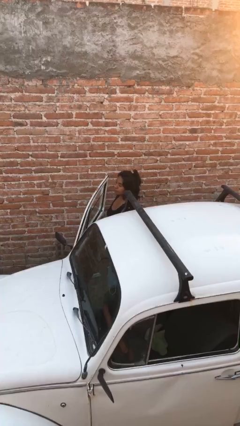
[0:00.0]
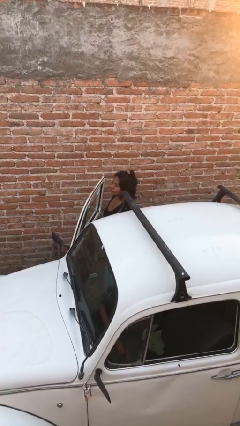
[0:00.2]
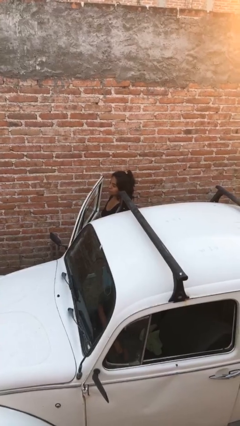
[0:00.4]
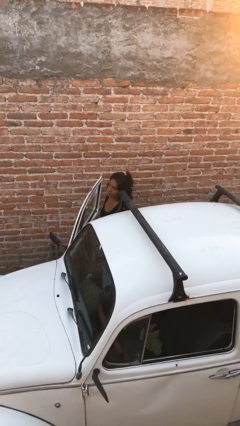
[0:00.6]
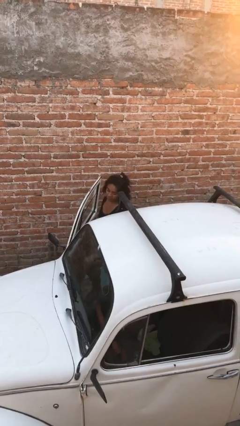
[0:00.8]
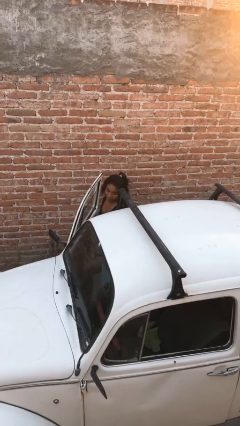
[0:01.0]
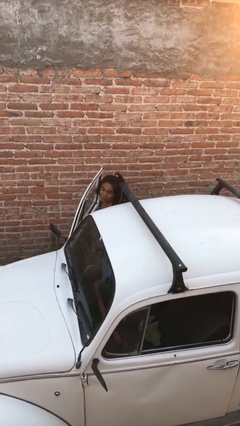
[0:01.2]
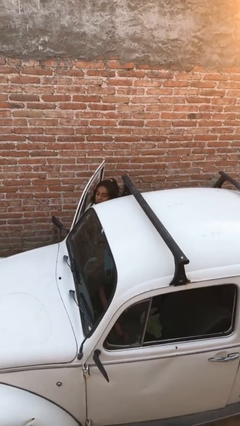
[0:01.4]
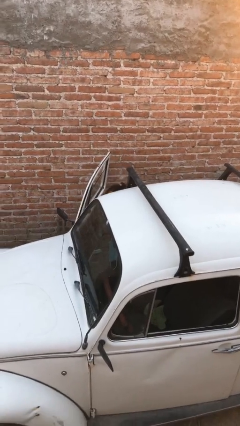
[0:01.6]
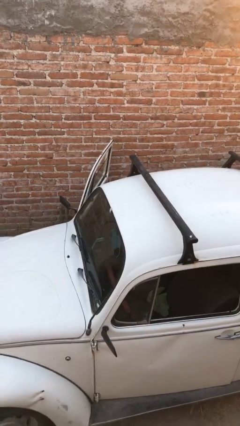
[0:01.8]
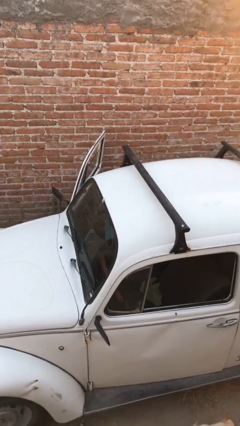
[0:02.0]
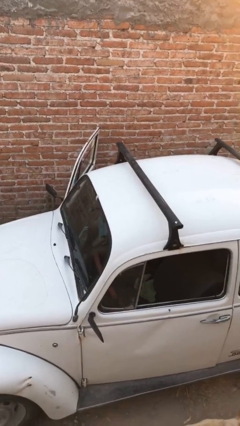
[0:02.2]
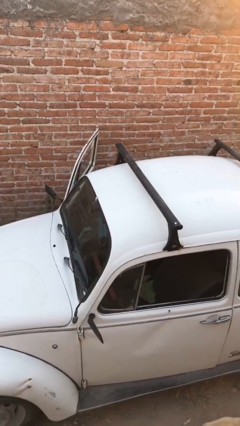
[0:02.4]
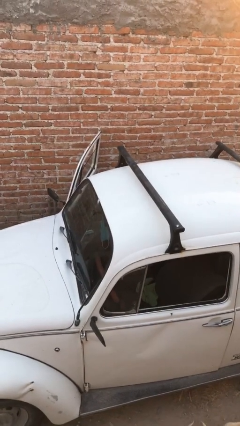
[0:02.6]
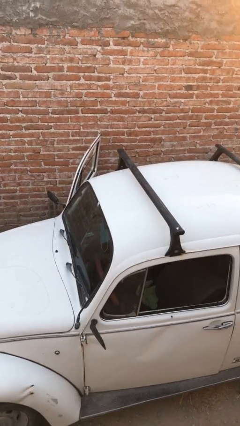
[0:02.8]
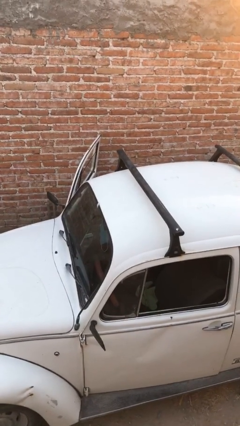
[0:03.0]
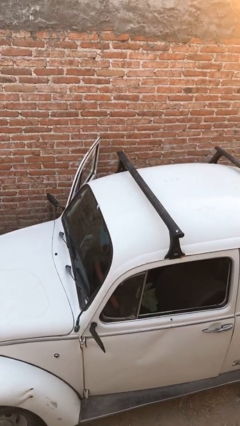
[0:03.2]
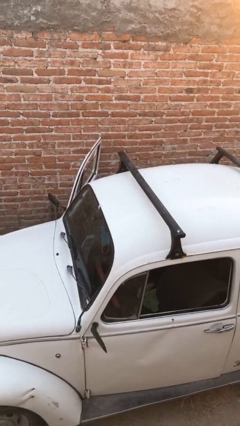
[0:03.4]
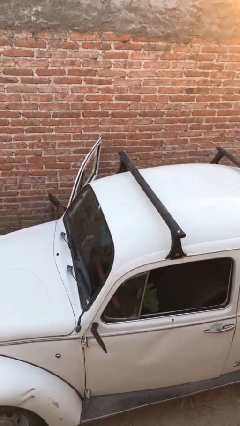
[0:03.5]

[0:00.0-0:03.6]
person enters car

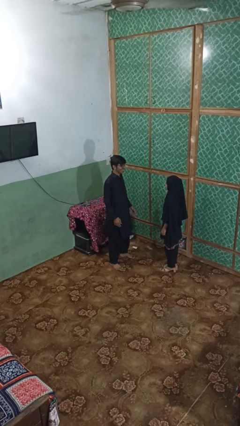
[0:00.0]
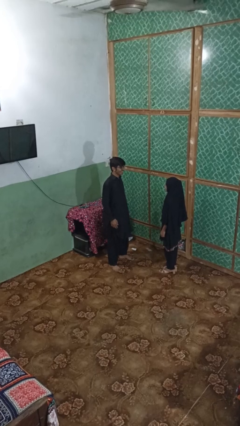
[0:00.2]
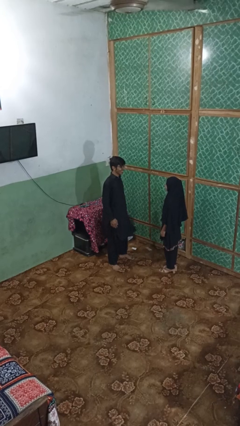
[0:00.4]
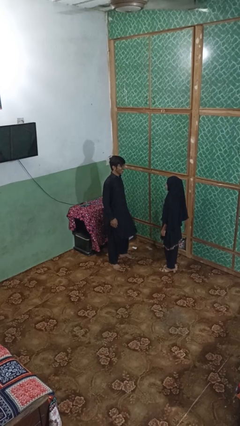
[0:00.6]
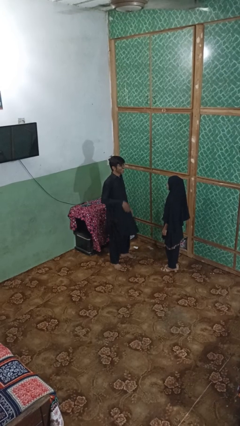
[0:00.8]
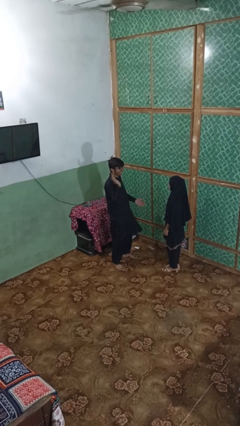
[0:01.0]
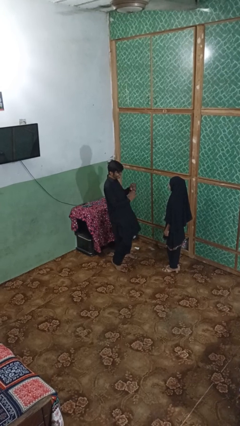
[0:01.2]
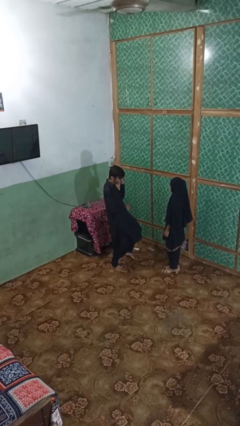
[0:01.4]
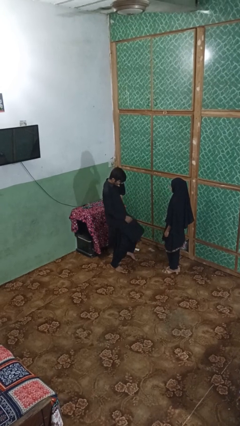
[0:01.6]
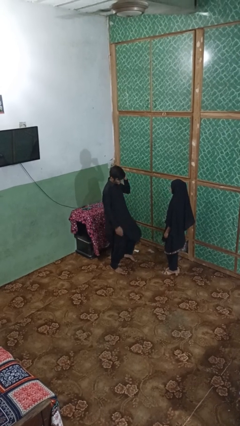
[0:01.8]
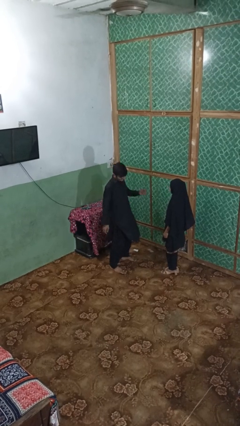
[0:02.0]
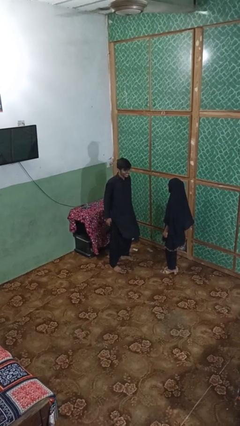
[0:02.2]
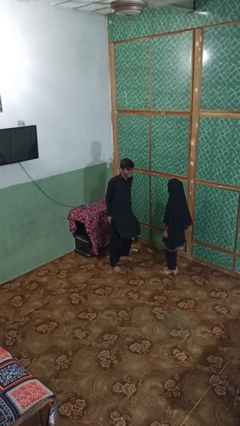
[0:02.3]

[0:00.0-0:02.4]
person laughs with person

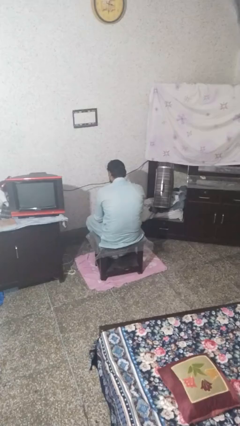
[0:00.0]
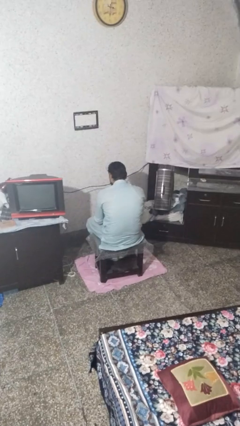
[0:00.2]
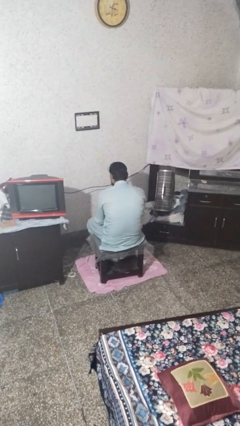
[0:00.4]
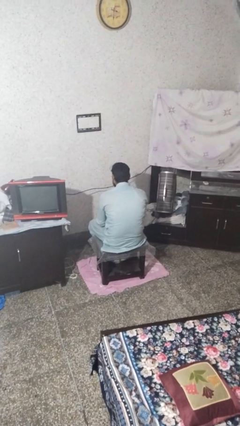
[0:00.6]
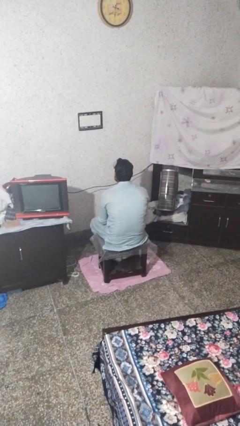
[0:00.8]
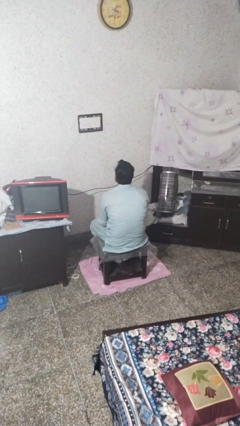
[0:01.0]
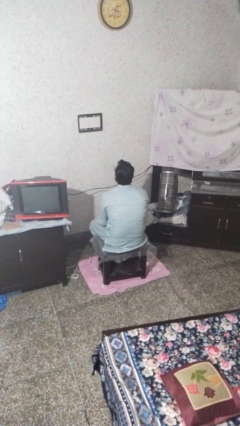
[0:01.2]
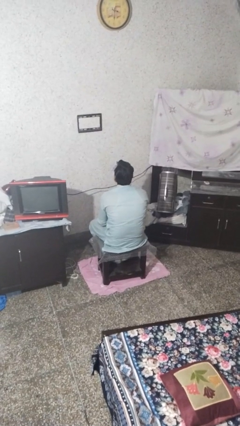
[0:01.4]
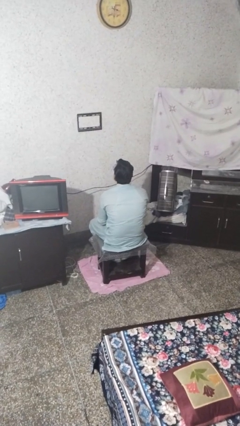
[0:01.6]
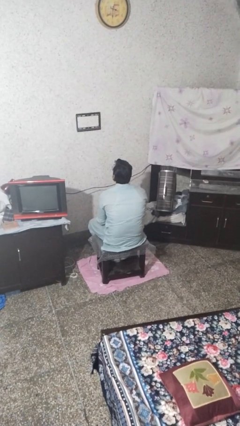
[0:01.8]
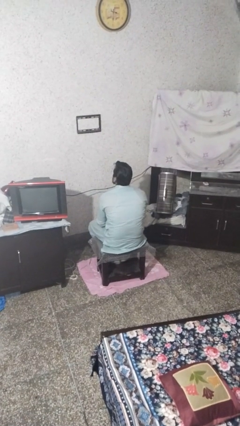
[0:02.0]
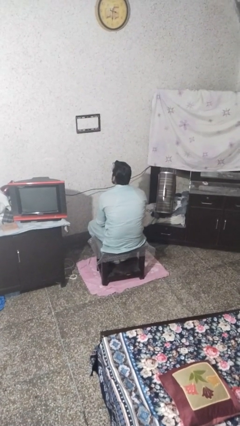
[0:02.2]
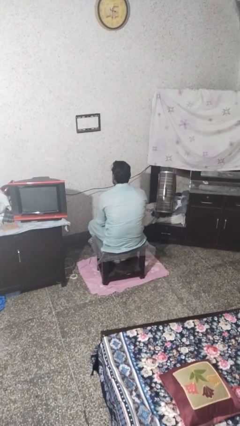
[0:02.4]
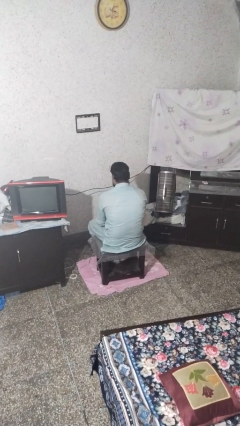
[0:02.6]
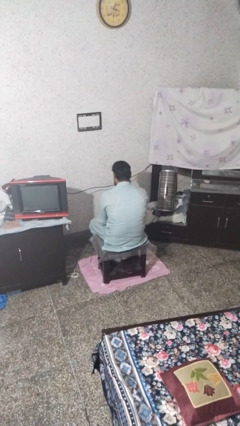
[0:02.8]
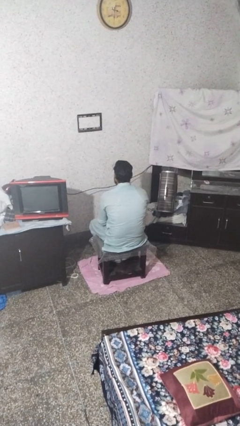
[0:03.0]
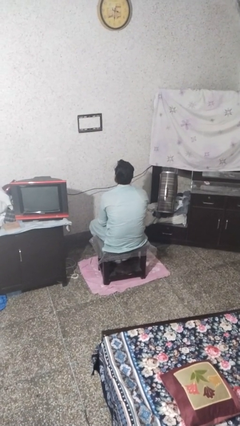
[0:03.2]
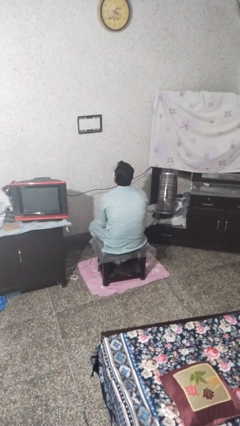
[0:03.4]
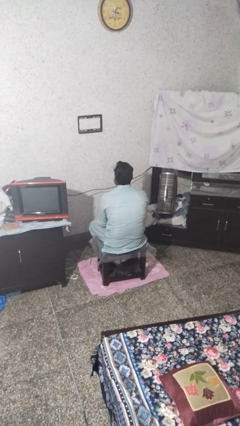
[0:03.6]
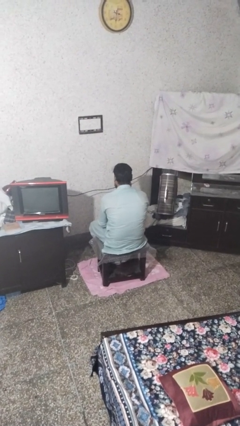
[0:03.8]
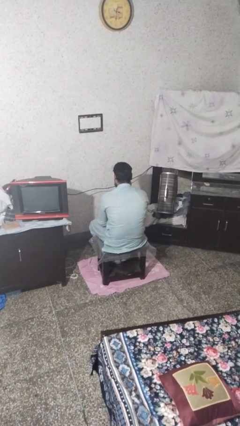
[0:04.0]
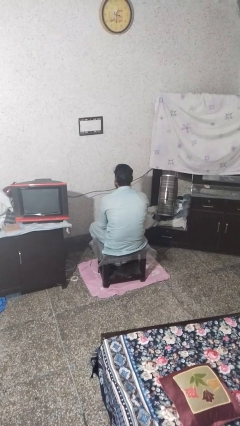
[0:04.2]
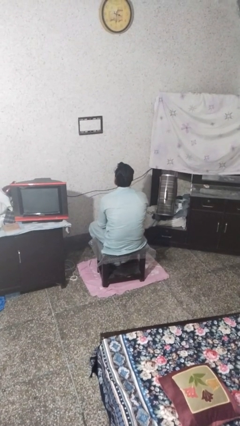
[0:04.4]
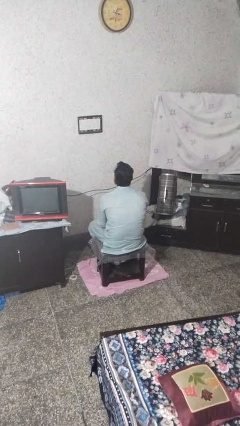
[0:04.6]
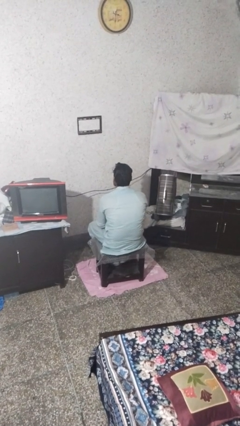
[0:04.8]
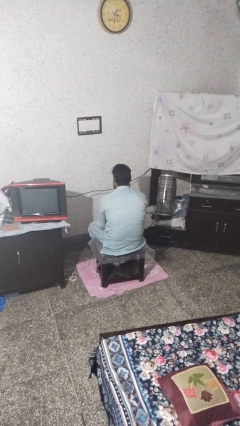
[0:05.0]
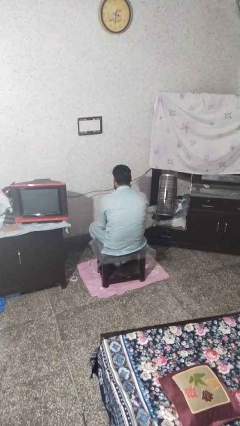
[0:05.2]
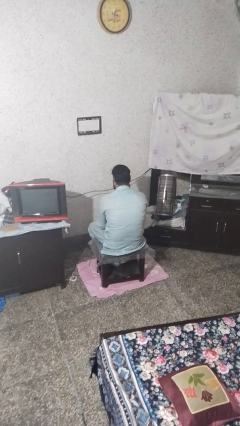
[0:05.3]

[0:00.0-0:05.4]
person nods head

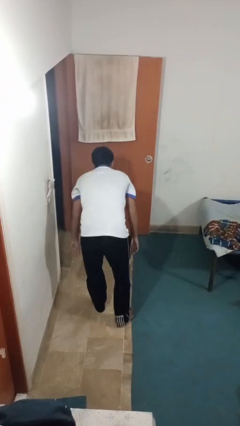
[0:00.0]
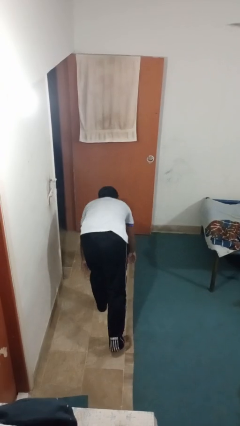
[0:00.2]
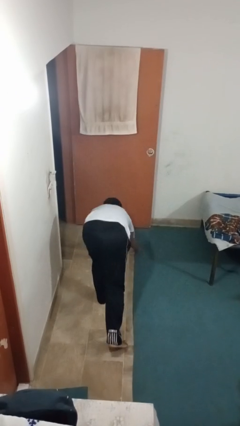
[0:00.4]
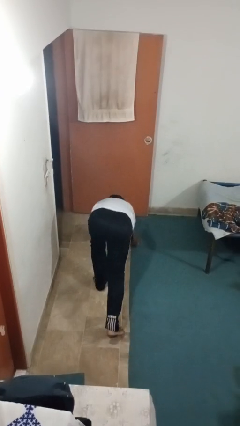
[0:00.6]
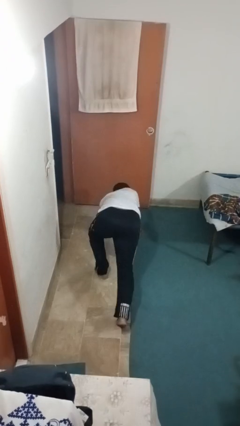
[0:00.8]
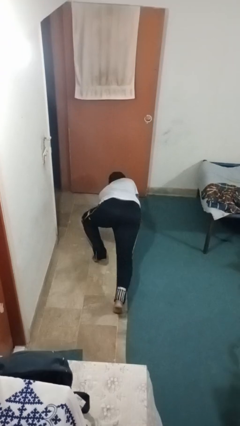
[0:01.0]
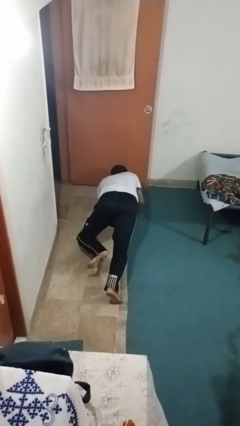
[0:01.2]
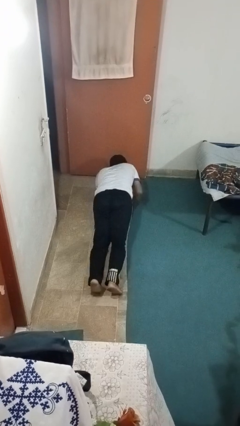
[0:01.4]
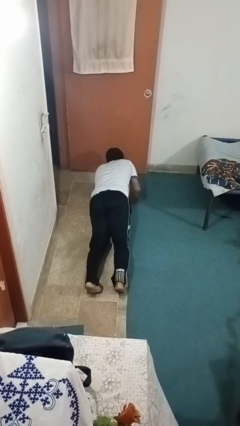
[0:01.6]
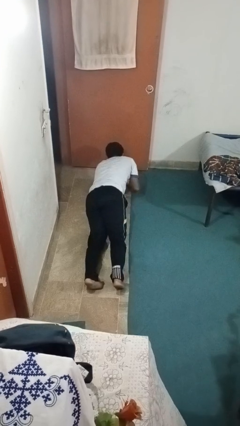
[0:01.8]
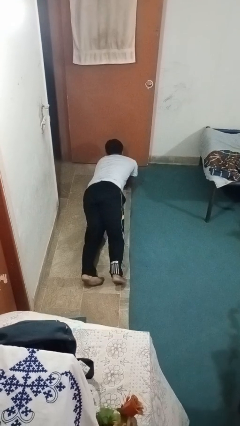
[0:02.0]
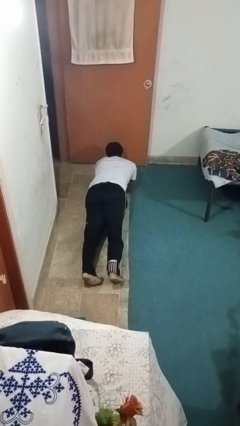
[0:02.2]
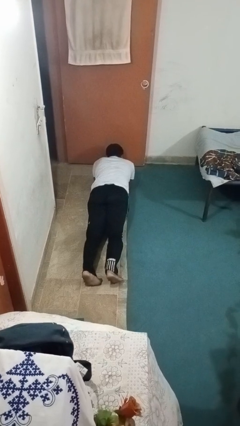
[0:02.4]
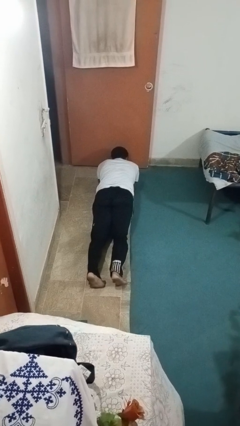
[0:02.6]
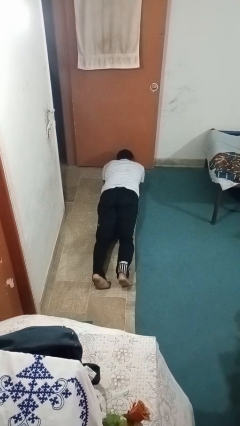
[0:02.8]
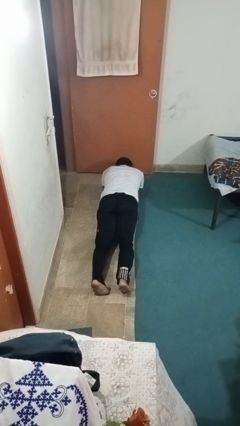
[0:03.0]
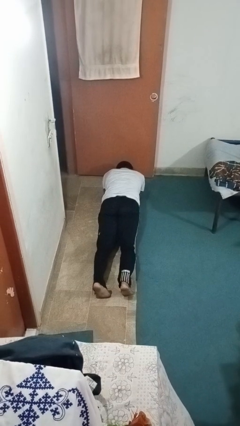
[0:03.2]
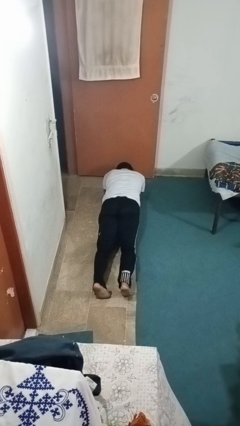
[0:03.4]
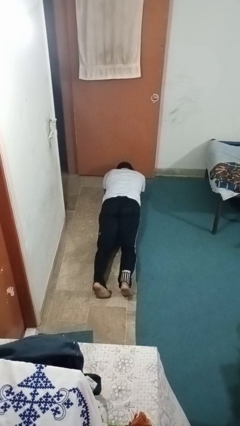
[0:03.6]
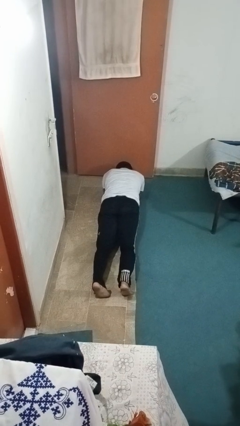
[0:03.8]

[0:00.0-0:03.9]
person exercises with plank

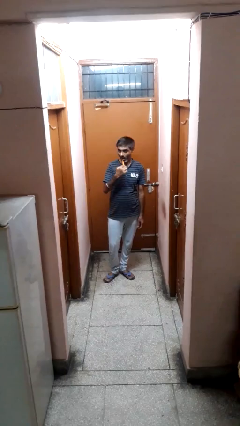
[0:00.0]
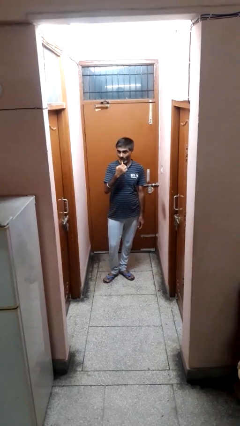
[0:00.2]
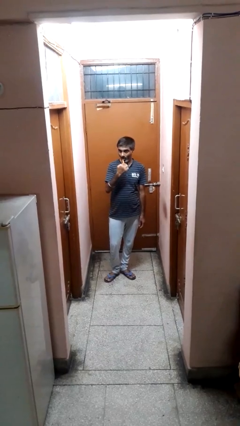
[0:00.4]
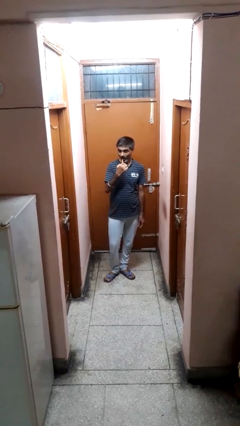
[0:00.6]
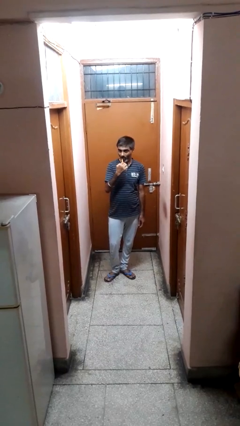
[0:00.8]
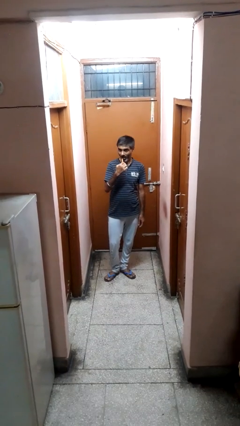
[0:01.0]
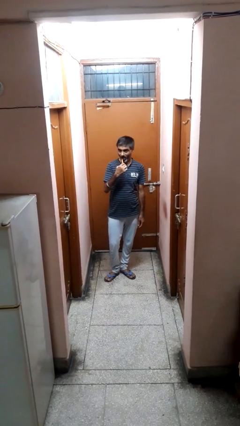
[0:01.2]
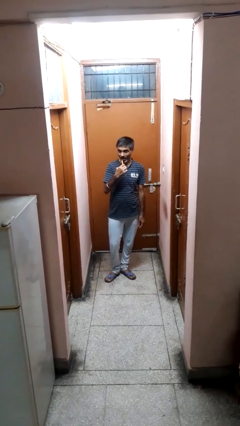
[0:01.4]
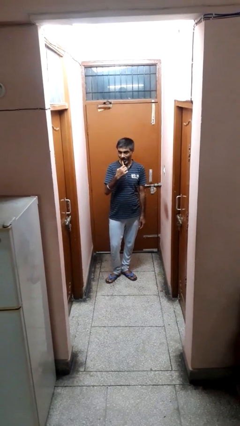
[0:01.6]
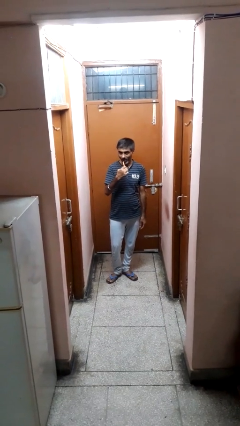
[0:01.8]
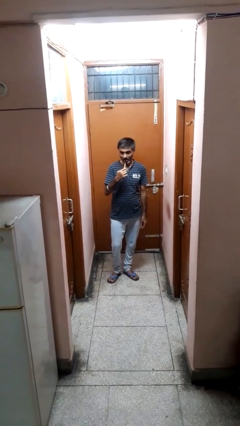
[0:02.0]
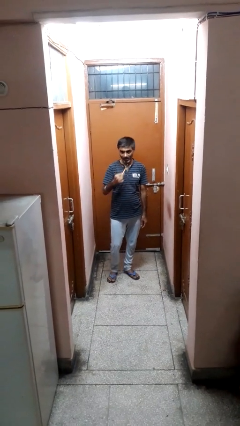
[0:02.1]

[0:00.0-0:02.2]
person brushes teeth

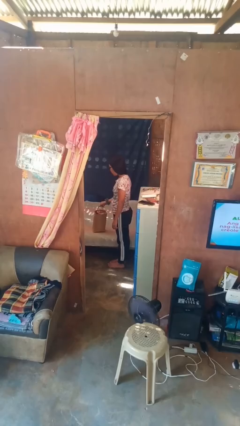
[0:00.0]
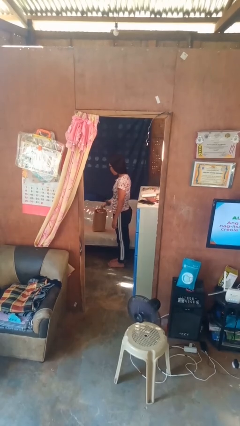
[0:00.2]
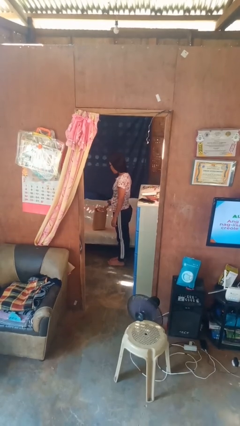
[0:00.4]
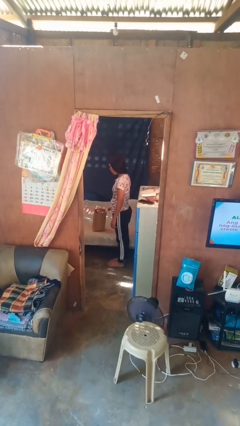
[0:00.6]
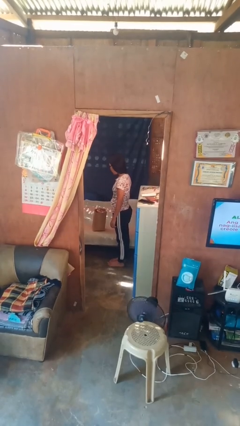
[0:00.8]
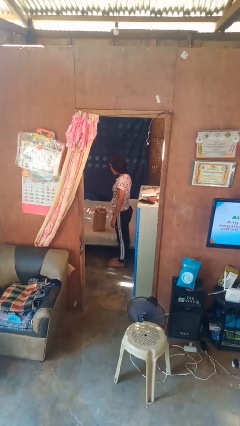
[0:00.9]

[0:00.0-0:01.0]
person puts down object on bed
